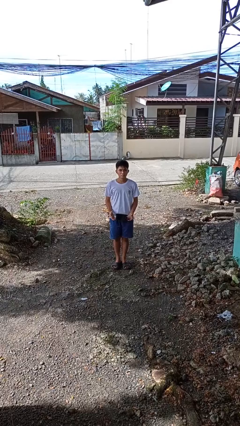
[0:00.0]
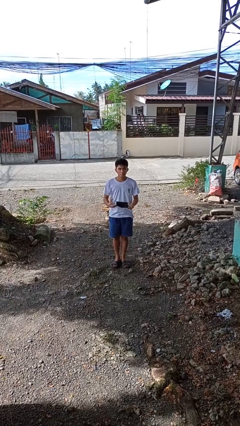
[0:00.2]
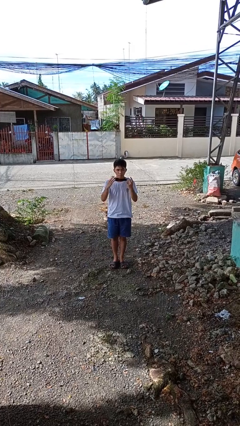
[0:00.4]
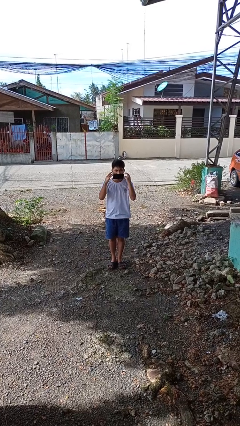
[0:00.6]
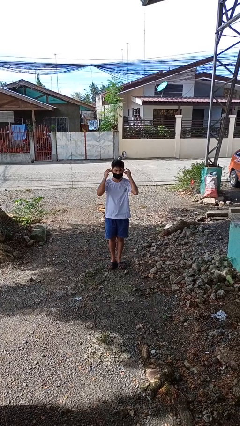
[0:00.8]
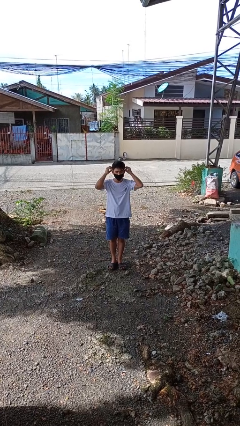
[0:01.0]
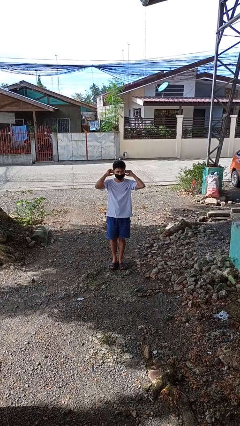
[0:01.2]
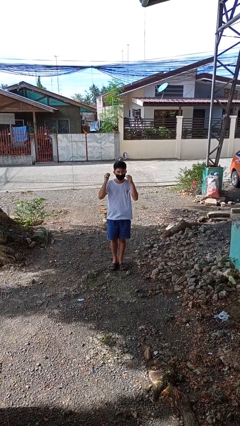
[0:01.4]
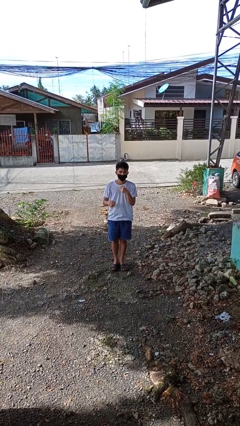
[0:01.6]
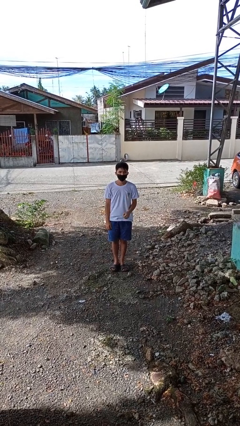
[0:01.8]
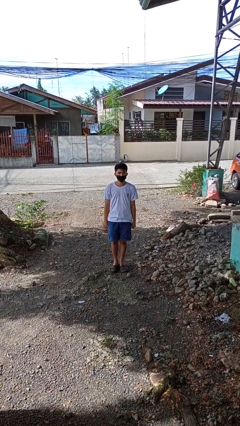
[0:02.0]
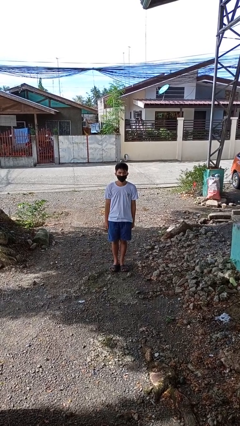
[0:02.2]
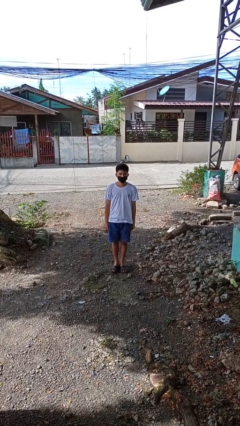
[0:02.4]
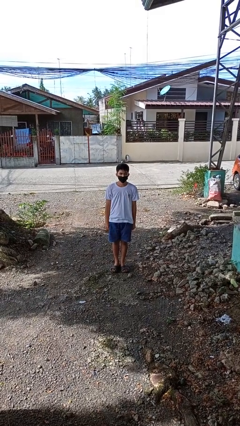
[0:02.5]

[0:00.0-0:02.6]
person puts on facemask

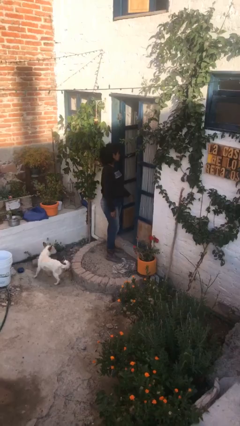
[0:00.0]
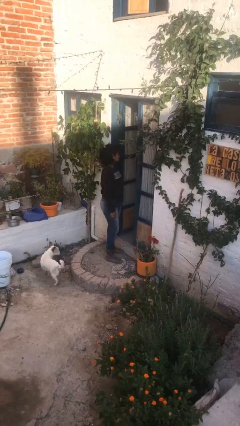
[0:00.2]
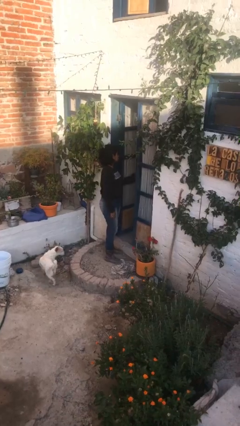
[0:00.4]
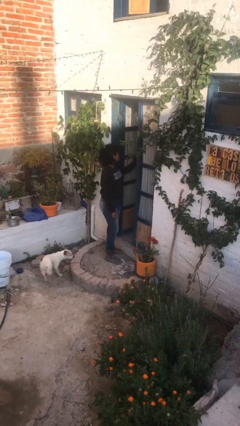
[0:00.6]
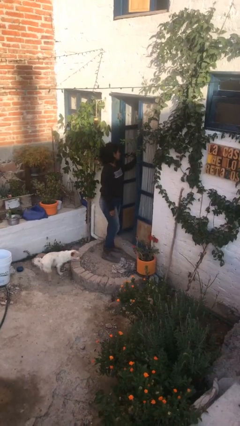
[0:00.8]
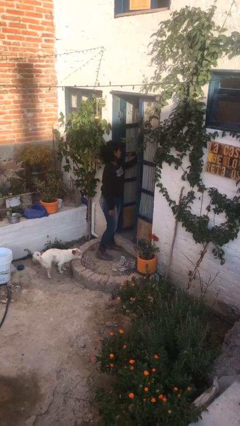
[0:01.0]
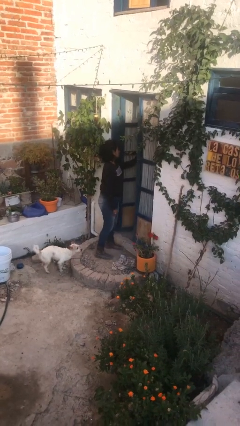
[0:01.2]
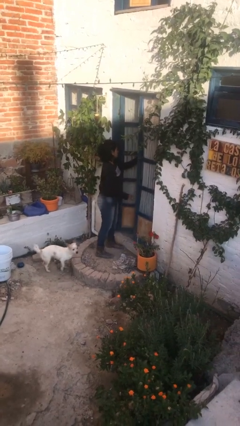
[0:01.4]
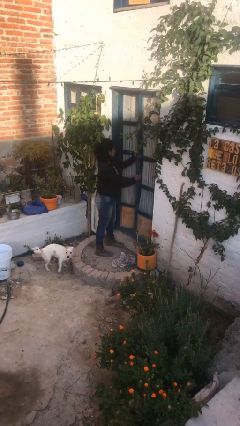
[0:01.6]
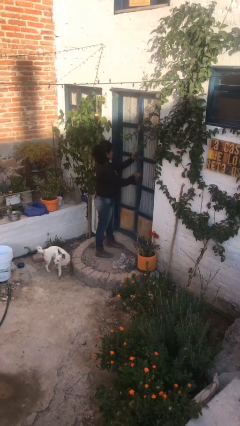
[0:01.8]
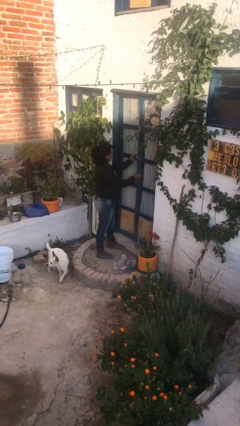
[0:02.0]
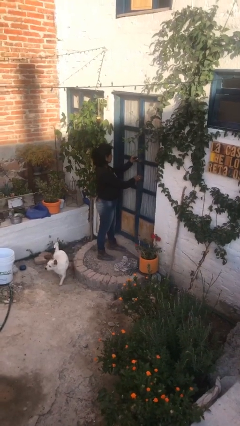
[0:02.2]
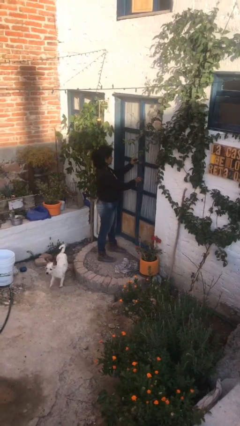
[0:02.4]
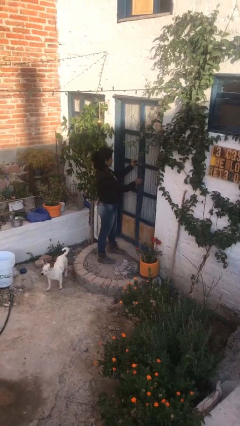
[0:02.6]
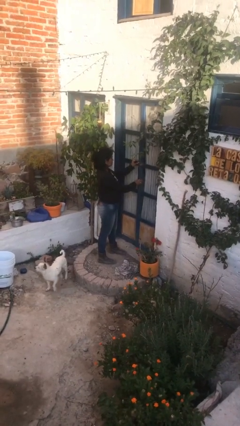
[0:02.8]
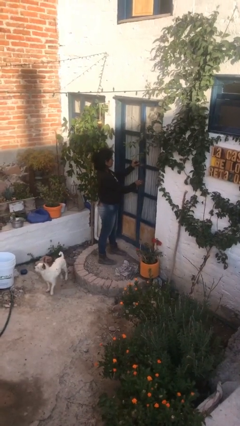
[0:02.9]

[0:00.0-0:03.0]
person closes facility door

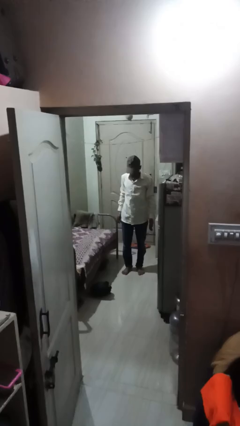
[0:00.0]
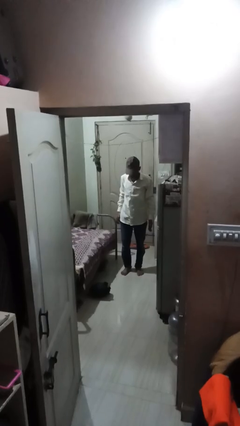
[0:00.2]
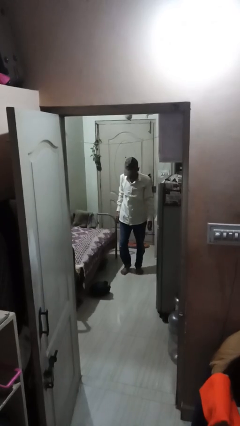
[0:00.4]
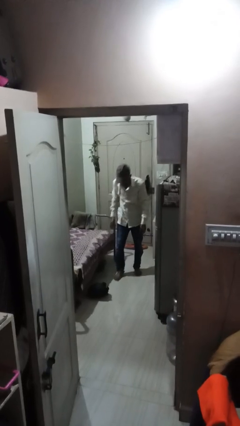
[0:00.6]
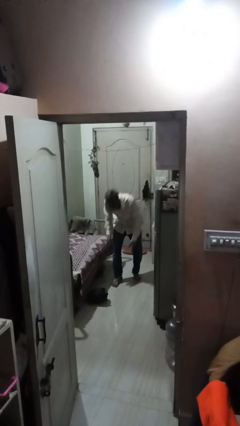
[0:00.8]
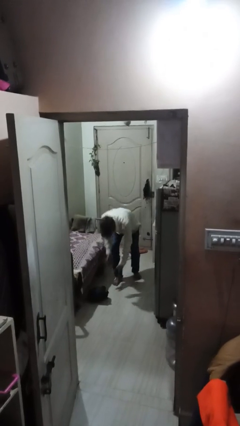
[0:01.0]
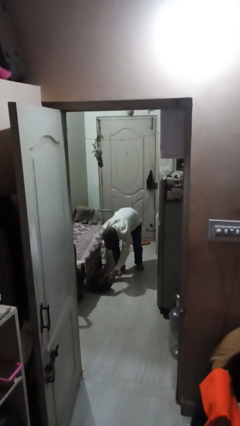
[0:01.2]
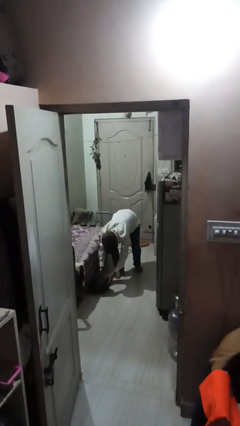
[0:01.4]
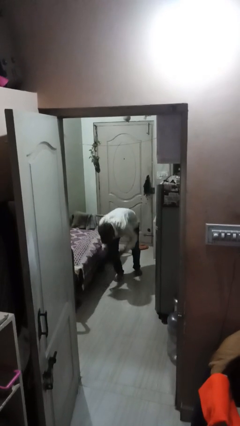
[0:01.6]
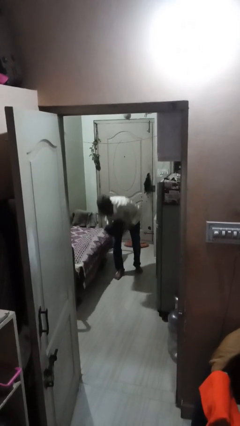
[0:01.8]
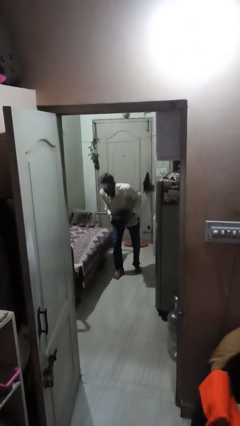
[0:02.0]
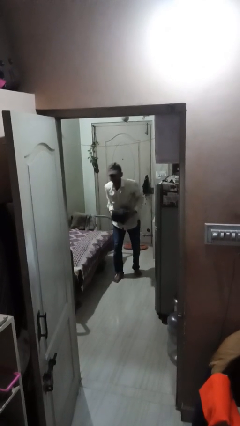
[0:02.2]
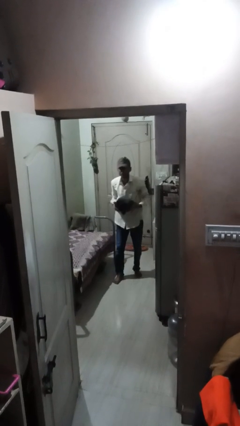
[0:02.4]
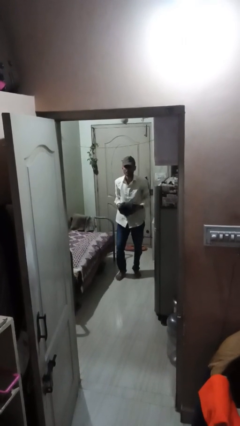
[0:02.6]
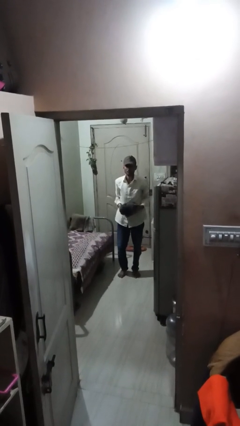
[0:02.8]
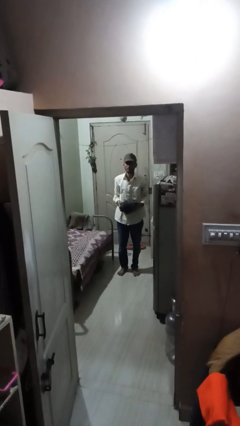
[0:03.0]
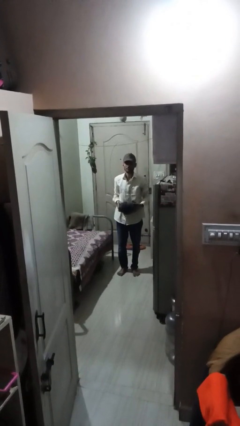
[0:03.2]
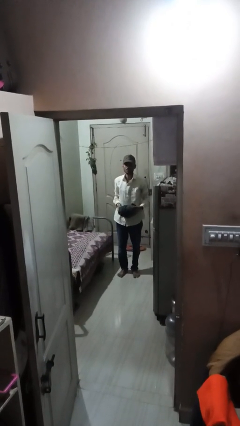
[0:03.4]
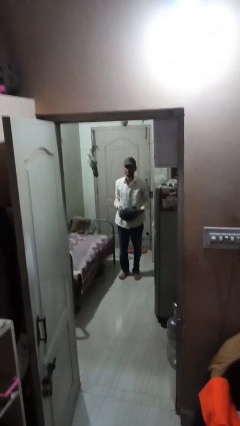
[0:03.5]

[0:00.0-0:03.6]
person picks up object from floor

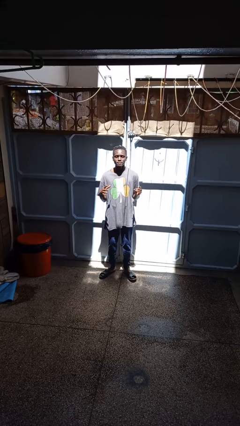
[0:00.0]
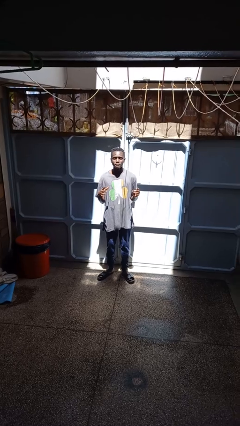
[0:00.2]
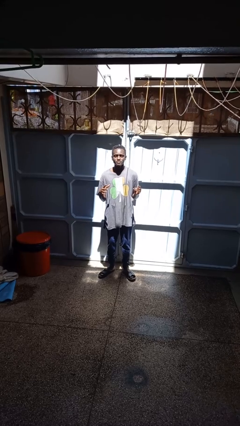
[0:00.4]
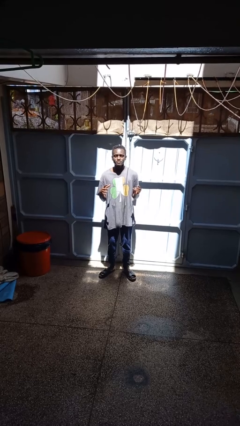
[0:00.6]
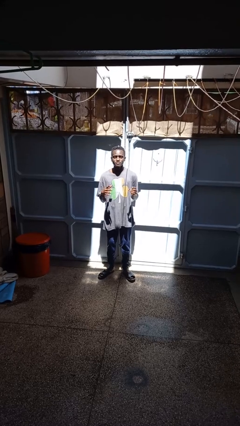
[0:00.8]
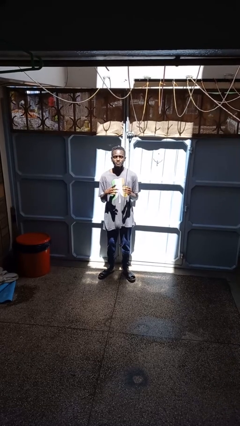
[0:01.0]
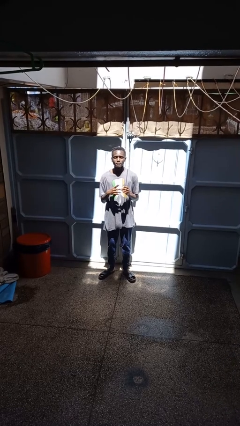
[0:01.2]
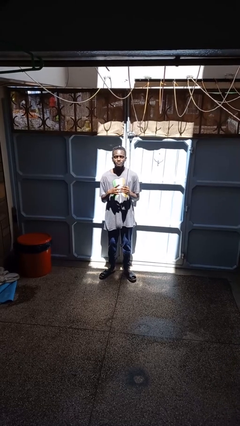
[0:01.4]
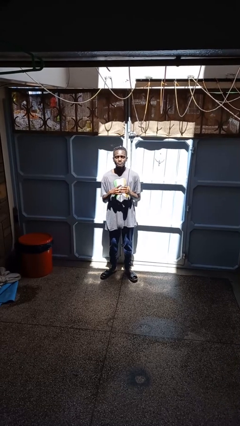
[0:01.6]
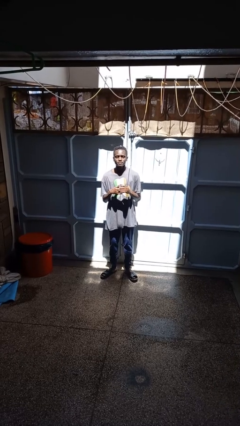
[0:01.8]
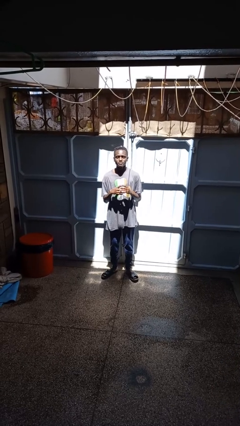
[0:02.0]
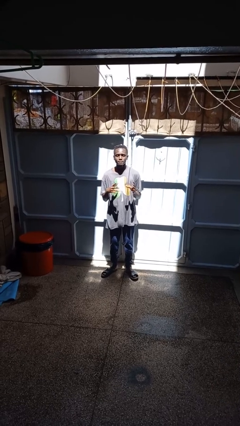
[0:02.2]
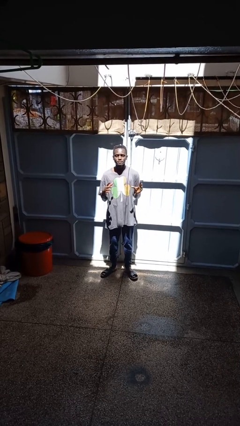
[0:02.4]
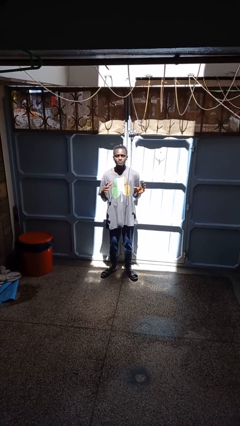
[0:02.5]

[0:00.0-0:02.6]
person puts on ring

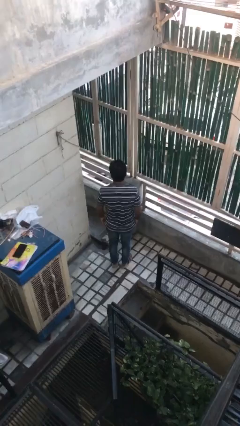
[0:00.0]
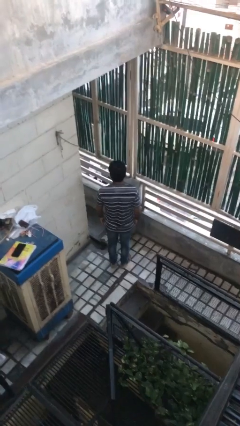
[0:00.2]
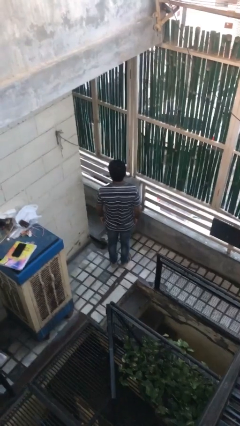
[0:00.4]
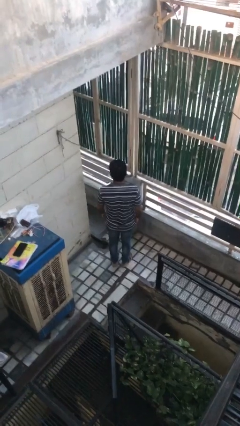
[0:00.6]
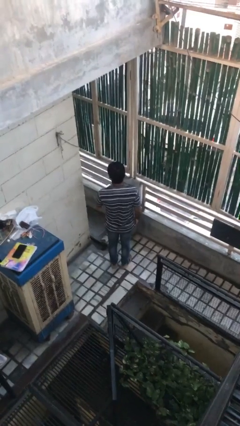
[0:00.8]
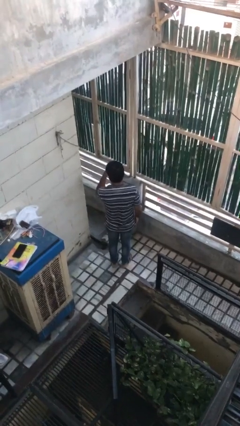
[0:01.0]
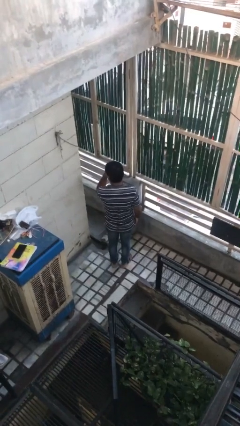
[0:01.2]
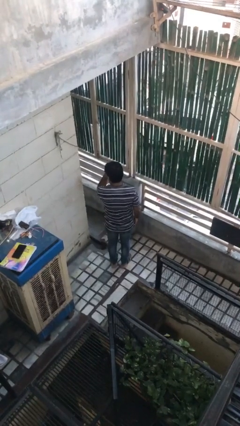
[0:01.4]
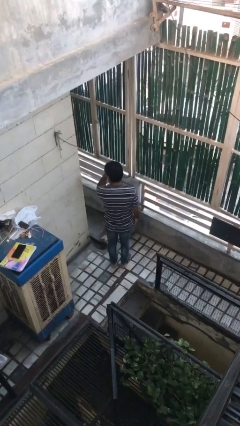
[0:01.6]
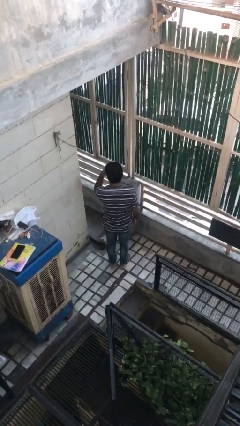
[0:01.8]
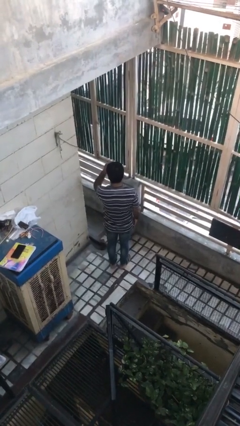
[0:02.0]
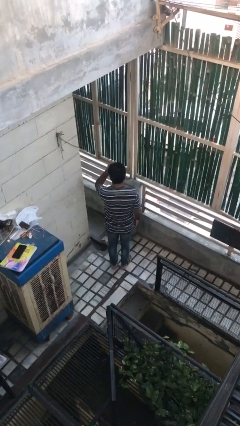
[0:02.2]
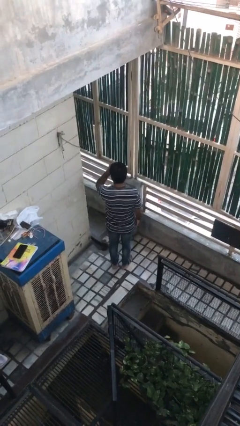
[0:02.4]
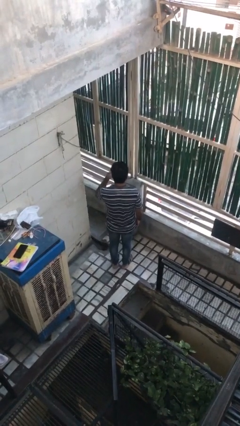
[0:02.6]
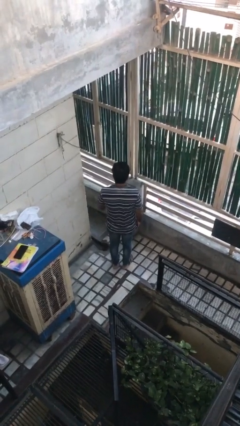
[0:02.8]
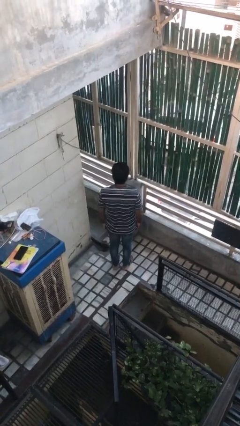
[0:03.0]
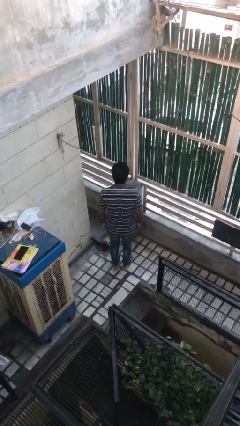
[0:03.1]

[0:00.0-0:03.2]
person gestures watch closely

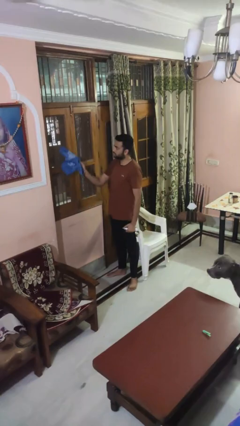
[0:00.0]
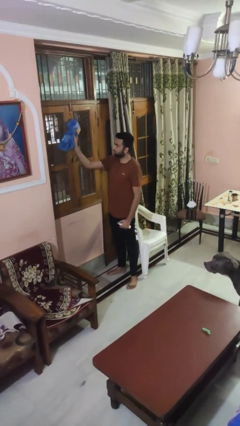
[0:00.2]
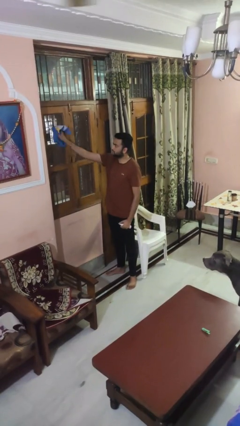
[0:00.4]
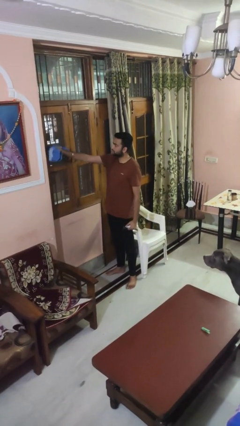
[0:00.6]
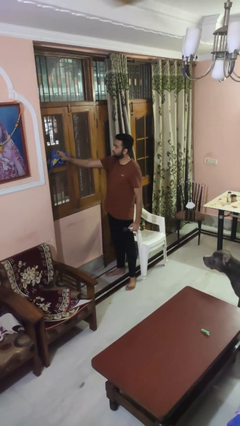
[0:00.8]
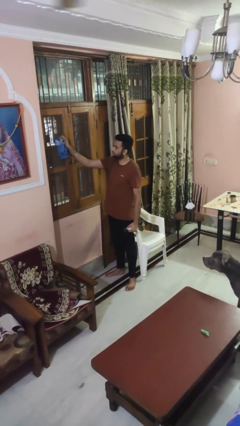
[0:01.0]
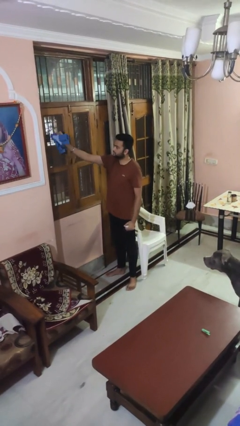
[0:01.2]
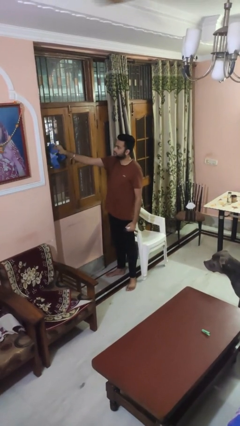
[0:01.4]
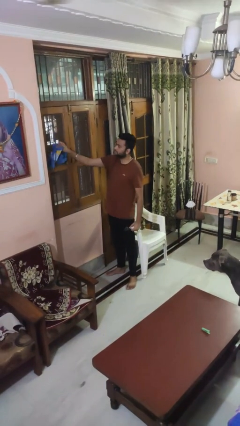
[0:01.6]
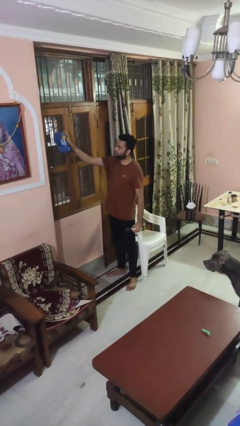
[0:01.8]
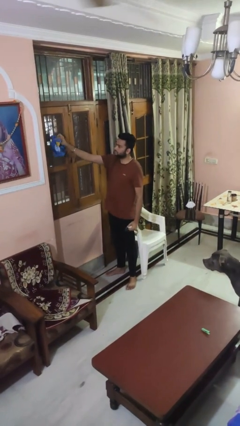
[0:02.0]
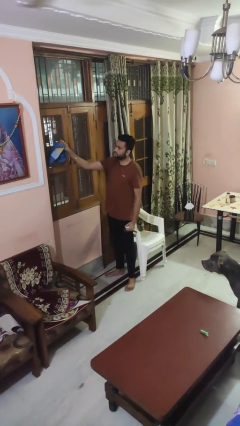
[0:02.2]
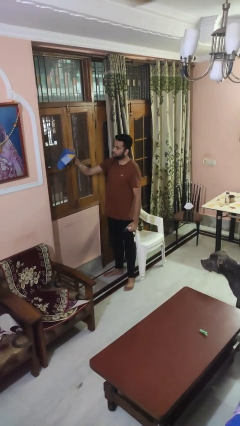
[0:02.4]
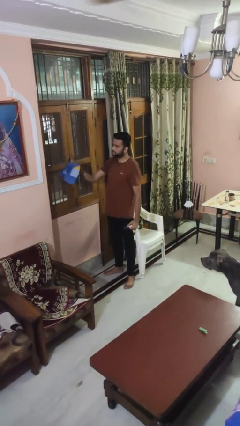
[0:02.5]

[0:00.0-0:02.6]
person washes window
